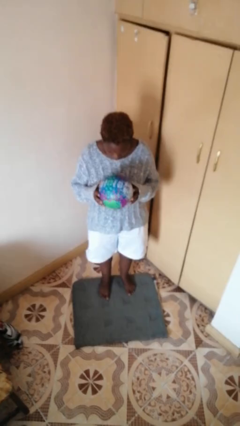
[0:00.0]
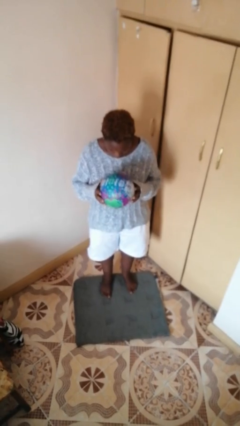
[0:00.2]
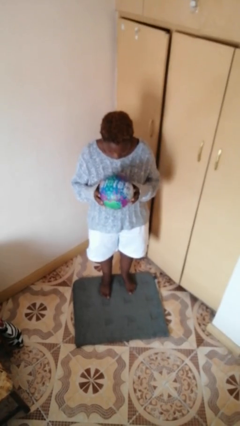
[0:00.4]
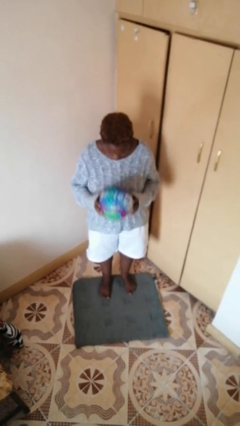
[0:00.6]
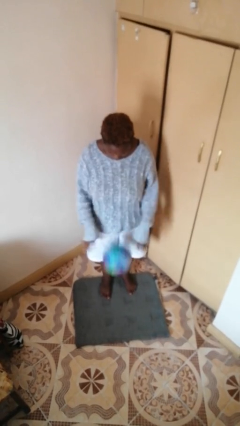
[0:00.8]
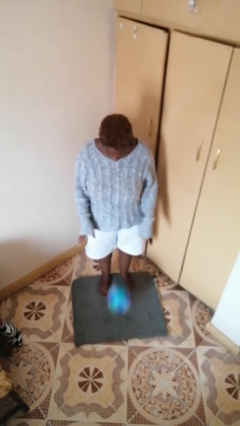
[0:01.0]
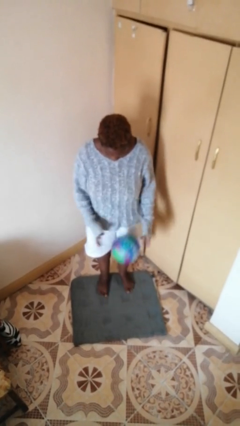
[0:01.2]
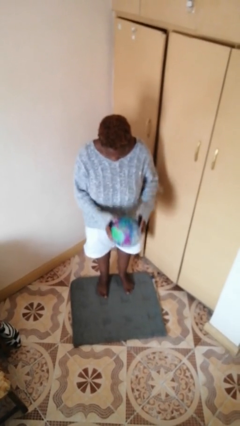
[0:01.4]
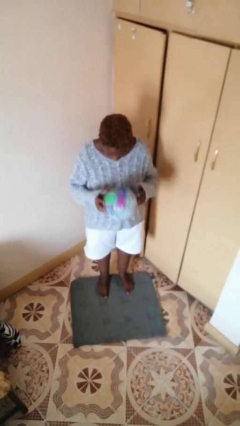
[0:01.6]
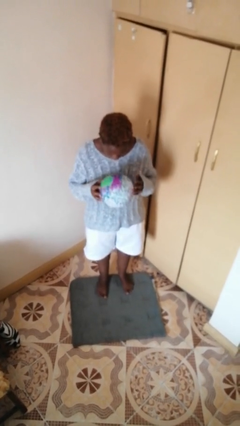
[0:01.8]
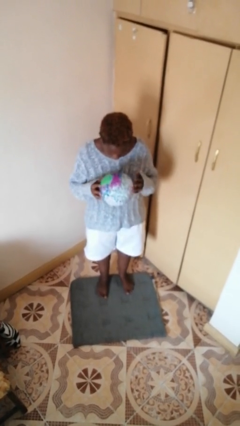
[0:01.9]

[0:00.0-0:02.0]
person bounces ball on floor

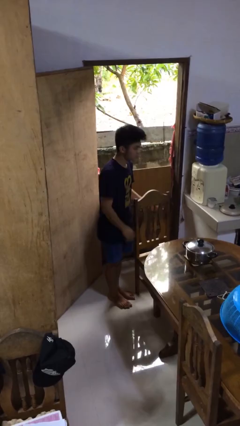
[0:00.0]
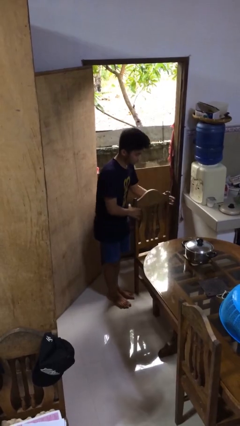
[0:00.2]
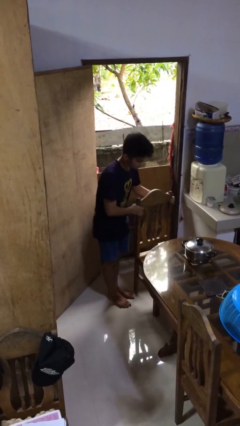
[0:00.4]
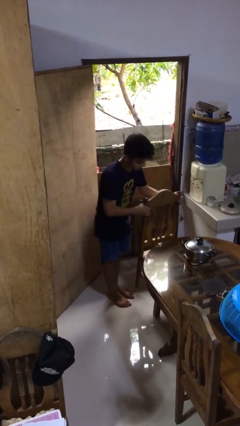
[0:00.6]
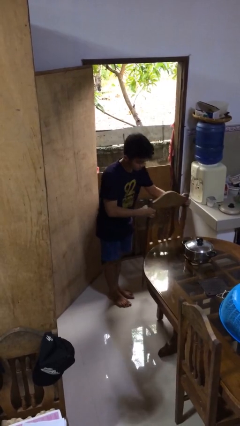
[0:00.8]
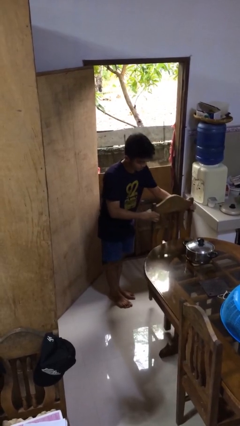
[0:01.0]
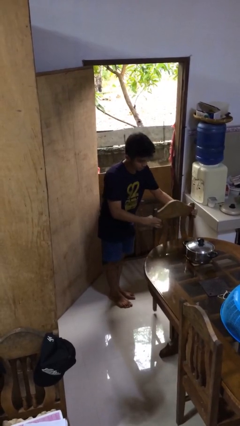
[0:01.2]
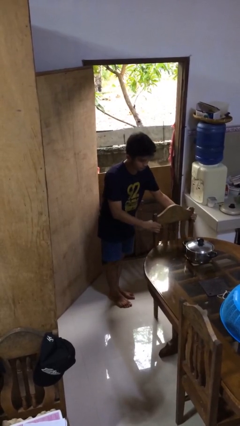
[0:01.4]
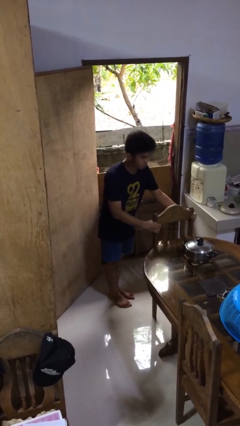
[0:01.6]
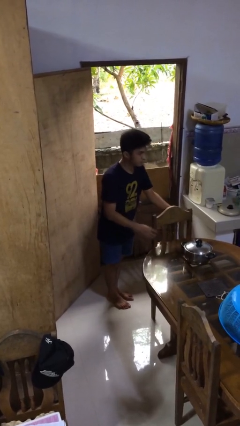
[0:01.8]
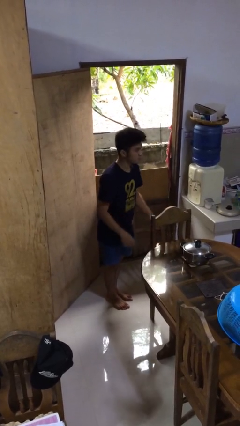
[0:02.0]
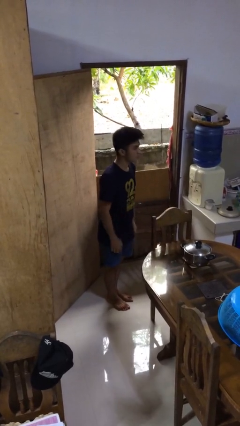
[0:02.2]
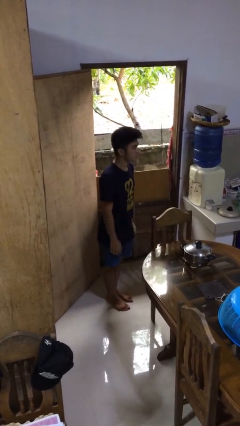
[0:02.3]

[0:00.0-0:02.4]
person pushes in chair

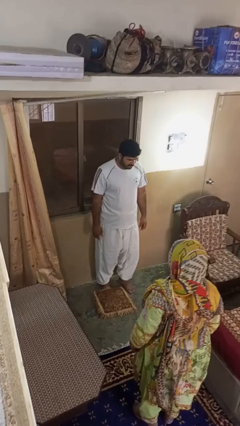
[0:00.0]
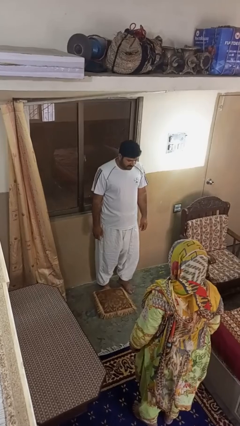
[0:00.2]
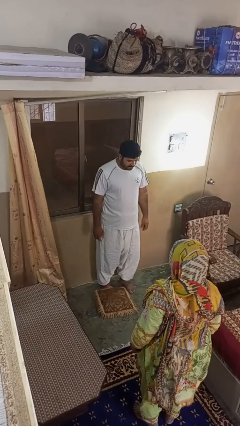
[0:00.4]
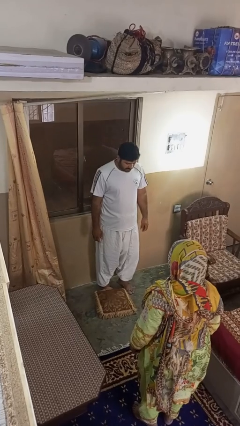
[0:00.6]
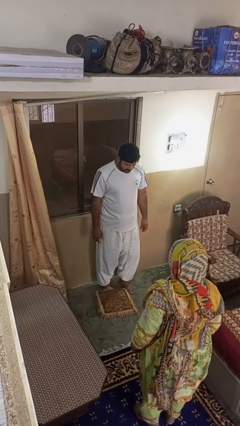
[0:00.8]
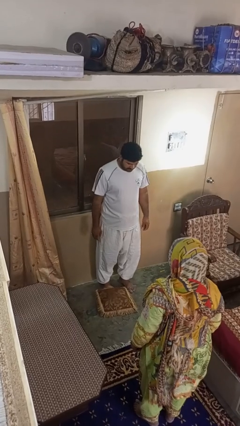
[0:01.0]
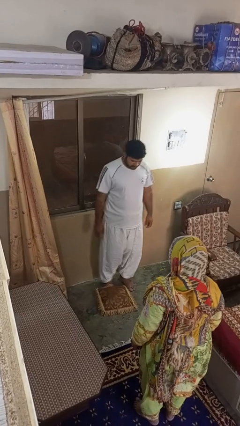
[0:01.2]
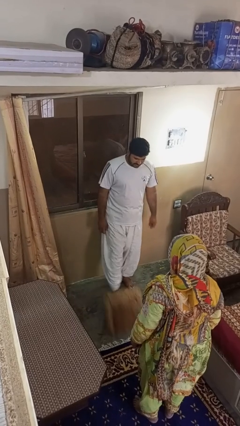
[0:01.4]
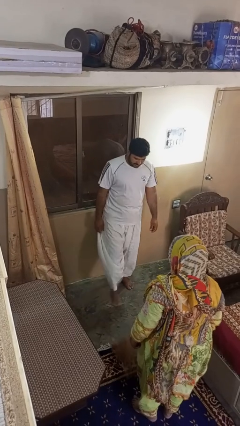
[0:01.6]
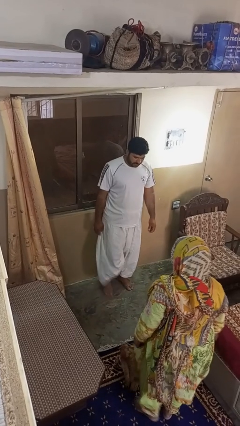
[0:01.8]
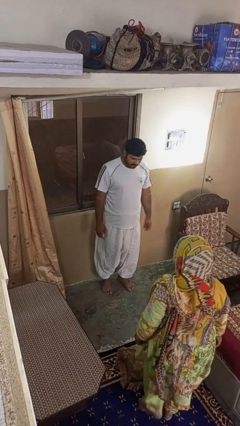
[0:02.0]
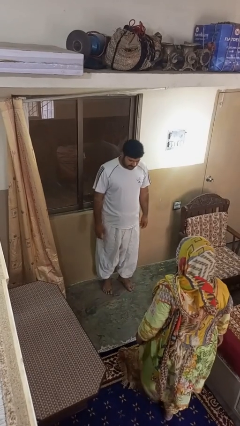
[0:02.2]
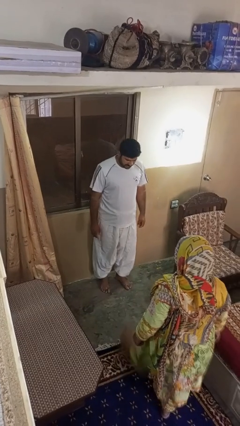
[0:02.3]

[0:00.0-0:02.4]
person kicks object to person

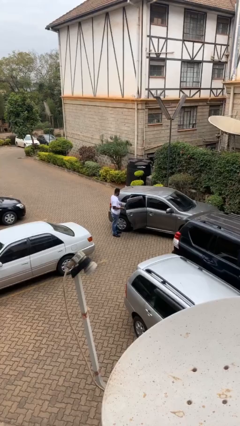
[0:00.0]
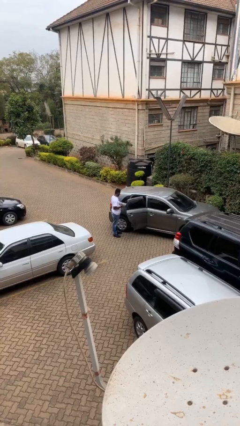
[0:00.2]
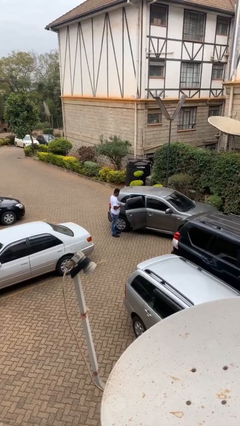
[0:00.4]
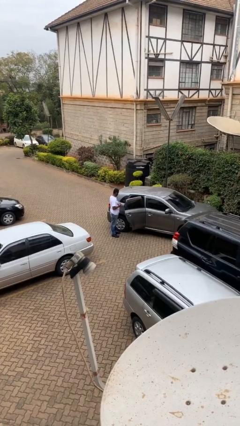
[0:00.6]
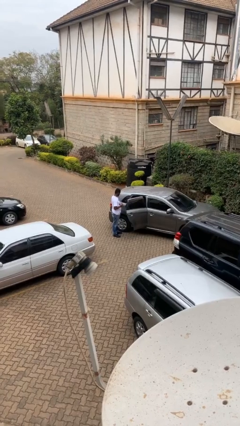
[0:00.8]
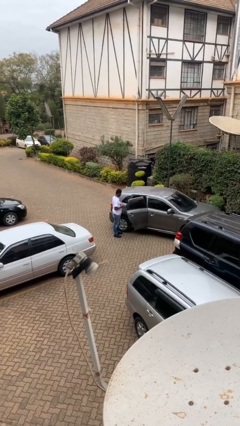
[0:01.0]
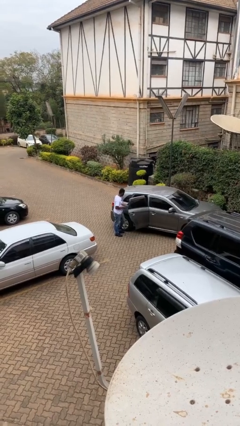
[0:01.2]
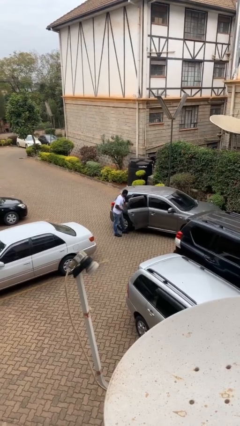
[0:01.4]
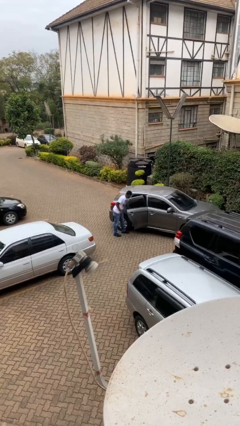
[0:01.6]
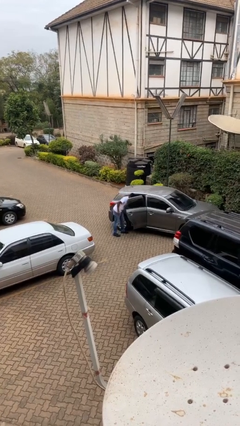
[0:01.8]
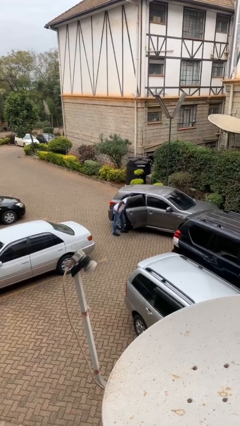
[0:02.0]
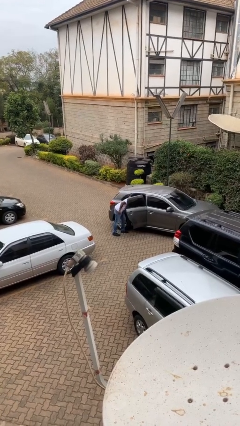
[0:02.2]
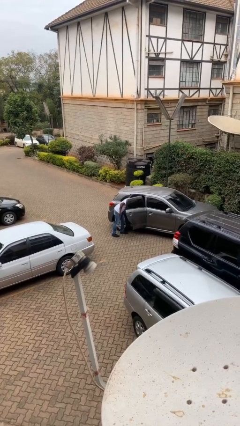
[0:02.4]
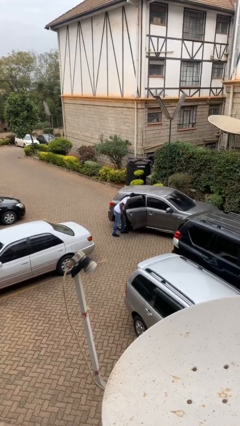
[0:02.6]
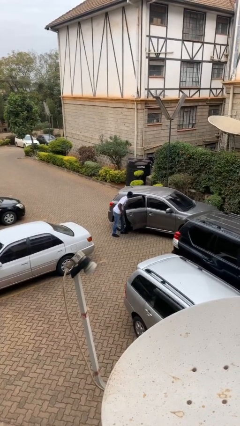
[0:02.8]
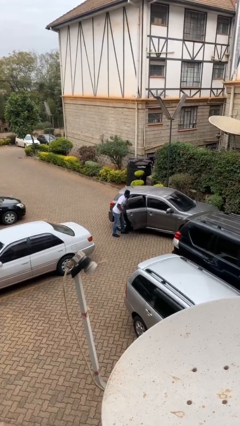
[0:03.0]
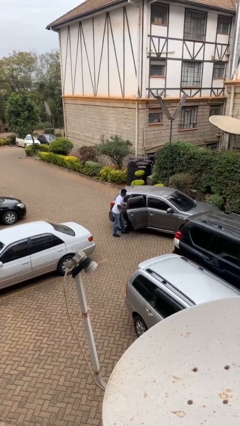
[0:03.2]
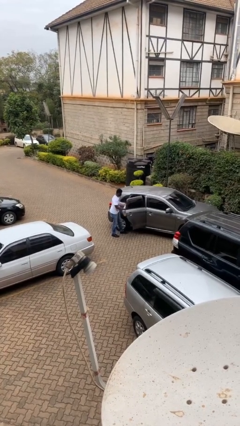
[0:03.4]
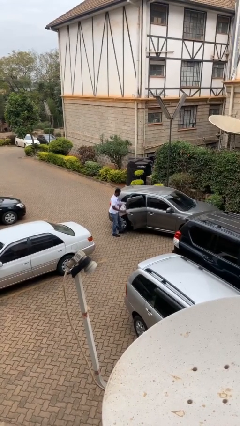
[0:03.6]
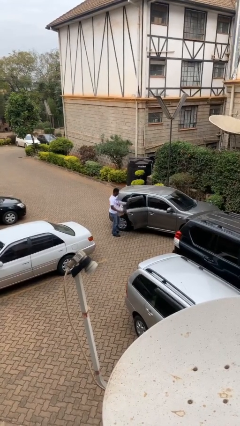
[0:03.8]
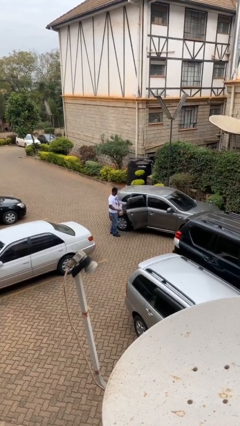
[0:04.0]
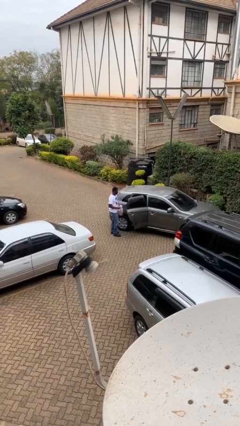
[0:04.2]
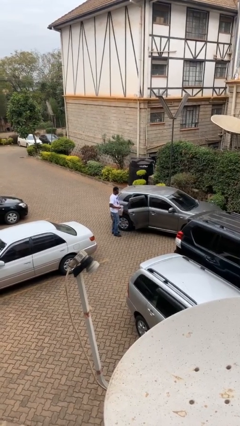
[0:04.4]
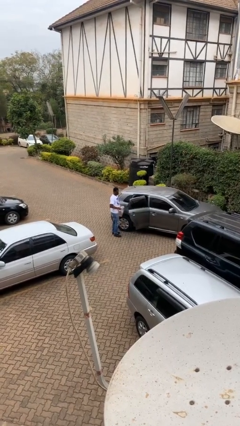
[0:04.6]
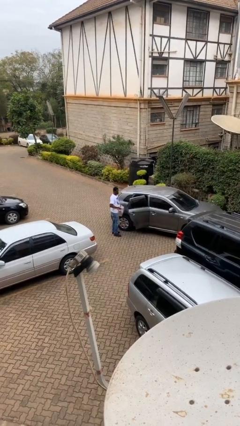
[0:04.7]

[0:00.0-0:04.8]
person unloads car

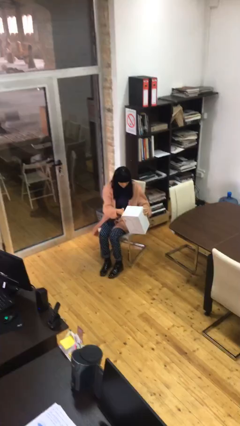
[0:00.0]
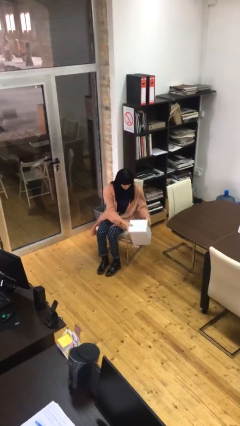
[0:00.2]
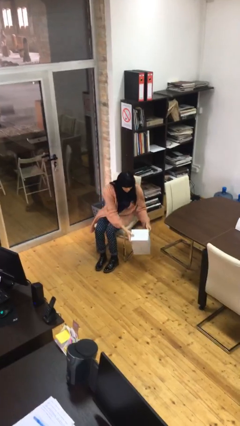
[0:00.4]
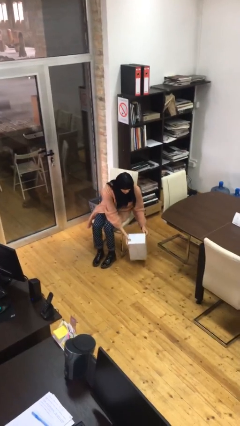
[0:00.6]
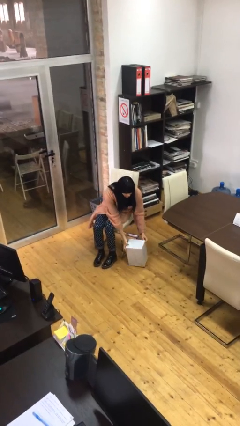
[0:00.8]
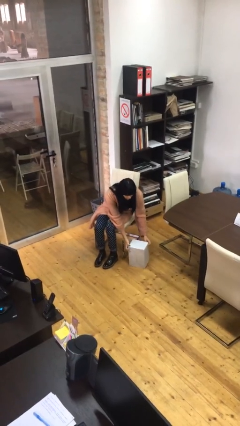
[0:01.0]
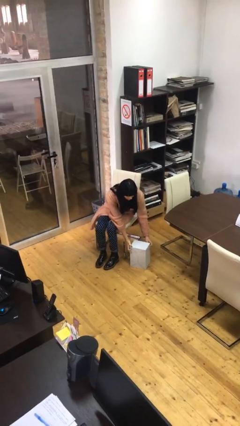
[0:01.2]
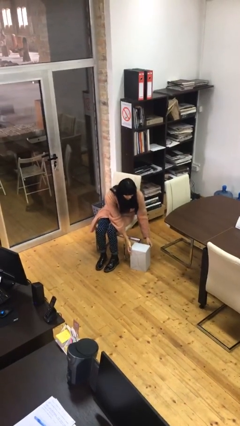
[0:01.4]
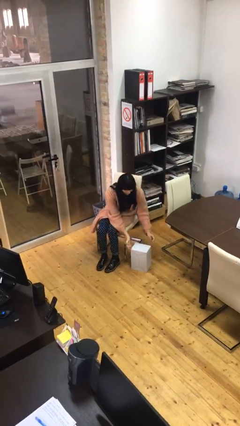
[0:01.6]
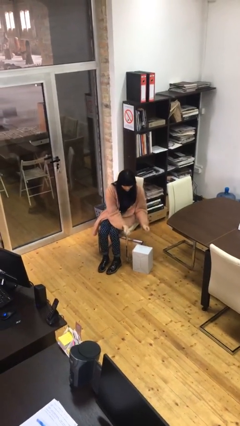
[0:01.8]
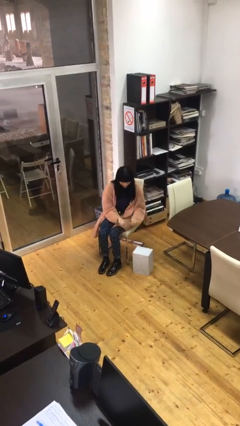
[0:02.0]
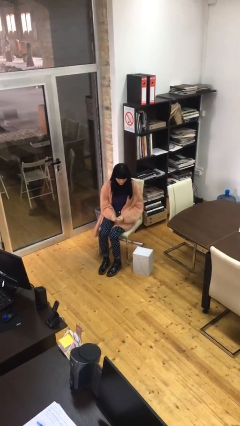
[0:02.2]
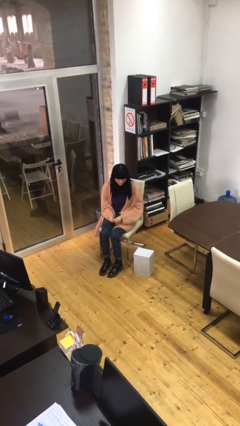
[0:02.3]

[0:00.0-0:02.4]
person puts down object on floor

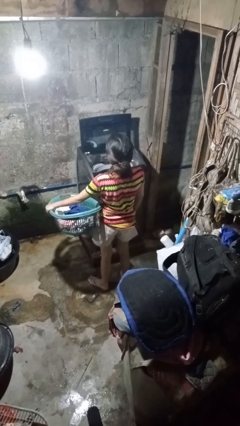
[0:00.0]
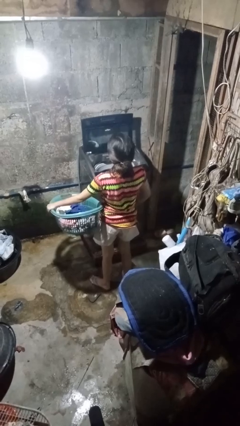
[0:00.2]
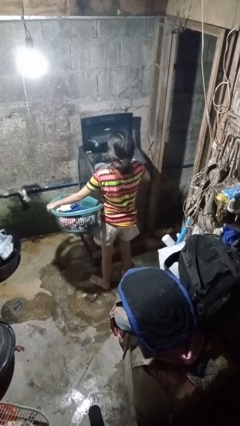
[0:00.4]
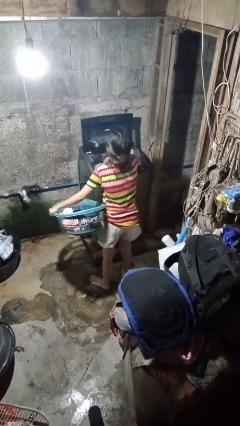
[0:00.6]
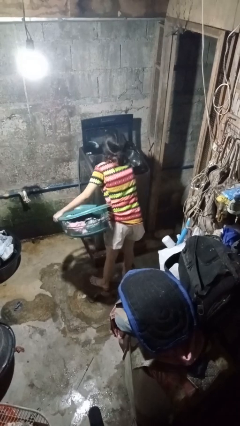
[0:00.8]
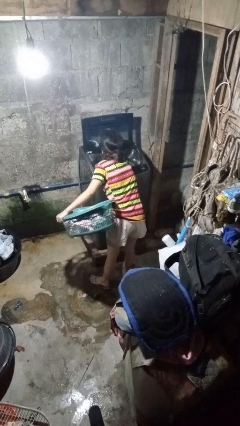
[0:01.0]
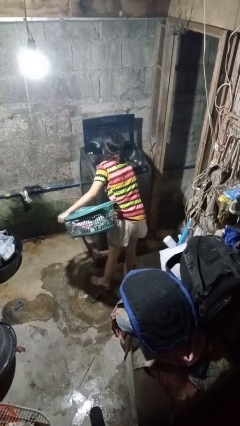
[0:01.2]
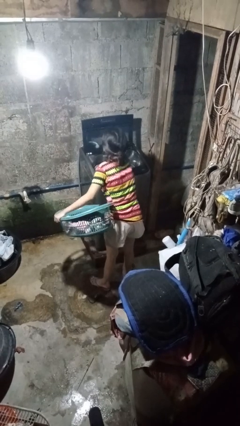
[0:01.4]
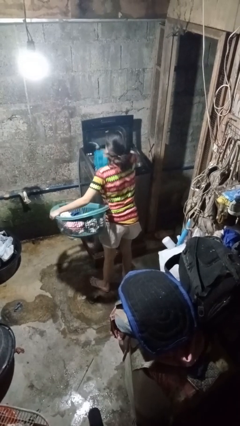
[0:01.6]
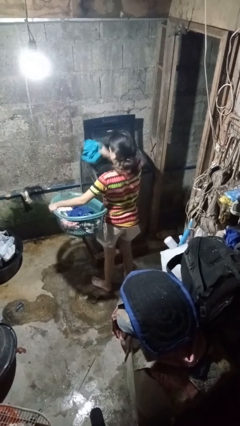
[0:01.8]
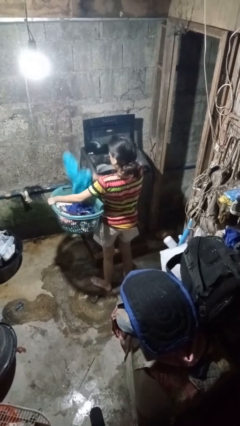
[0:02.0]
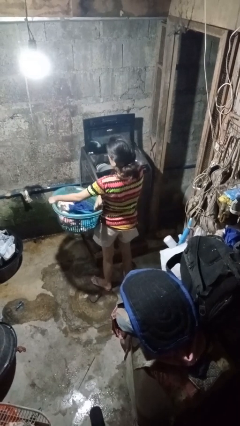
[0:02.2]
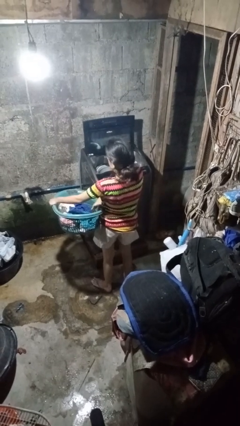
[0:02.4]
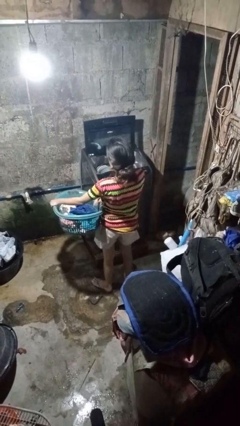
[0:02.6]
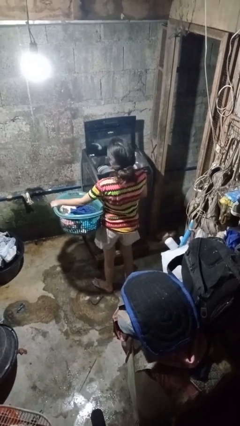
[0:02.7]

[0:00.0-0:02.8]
person unloads clotheswasher

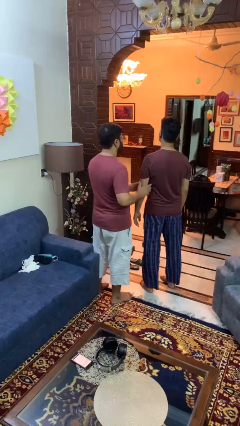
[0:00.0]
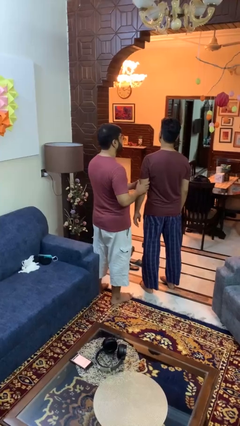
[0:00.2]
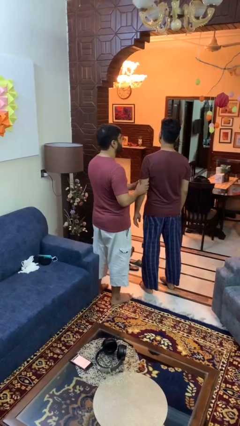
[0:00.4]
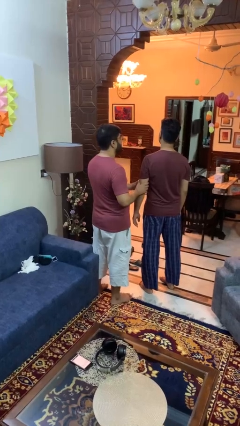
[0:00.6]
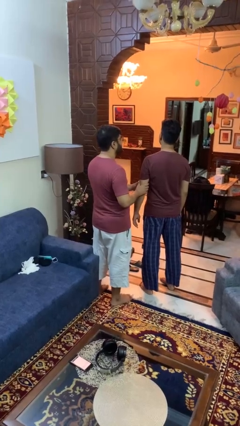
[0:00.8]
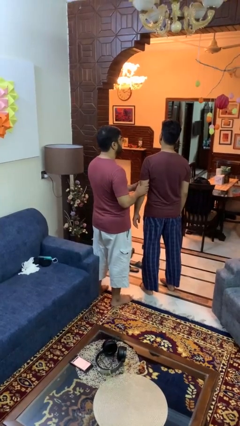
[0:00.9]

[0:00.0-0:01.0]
person grabs person by bicep
